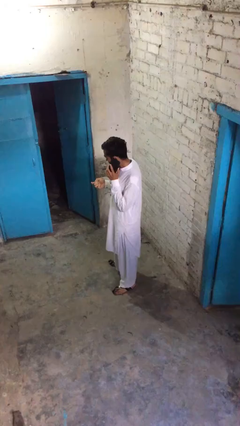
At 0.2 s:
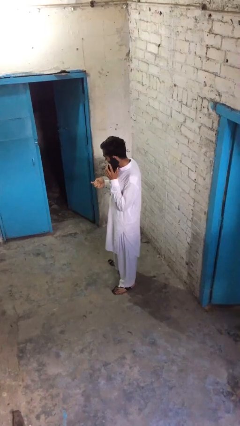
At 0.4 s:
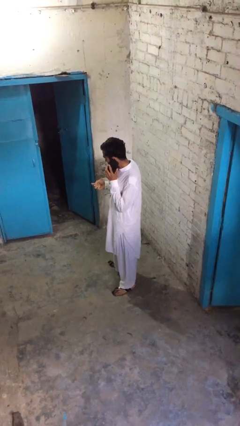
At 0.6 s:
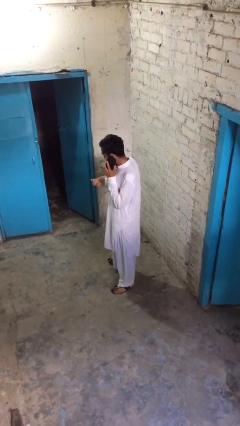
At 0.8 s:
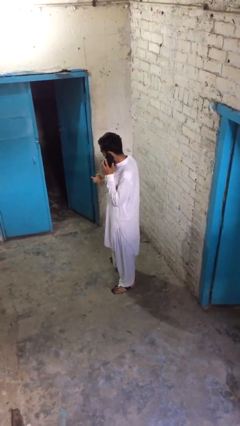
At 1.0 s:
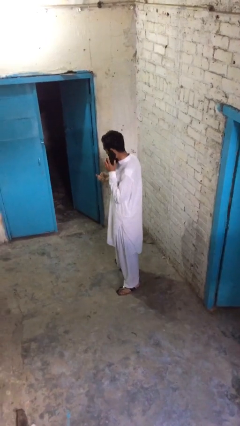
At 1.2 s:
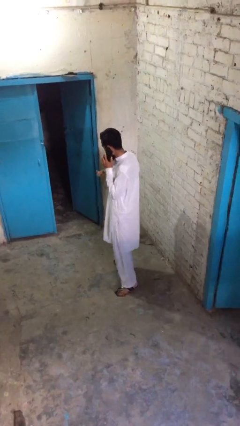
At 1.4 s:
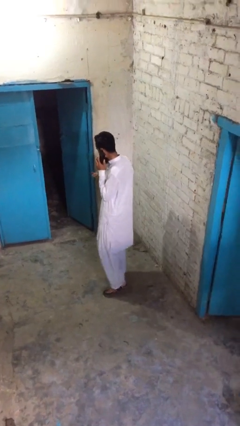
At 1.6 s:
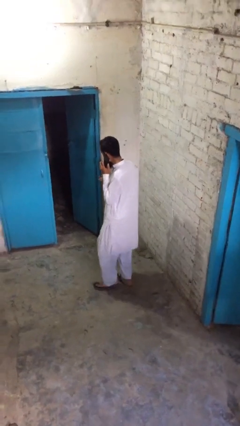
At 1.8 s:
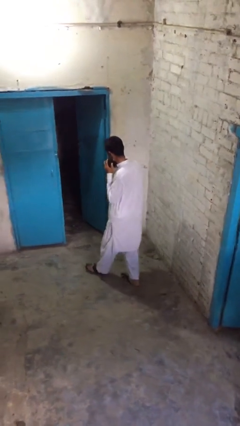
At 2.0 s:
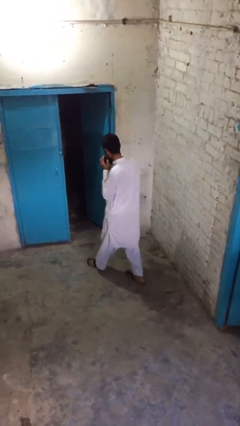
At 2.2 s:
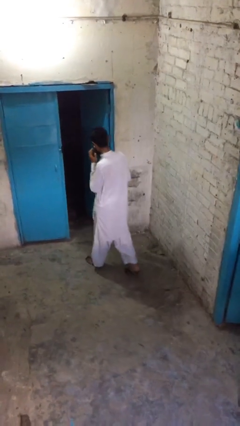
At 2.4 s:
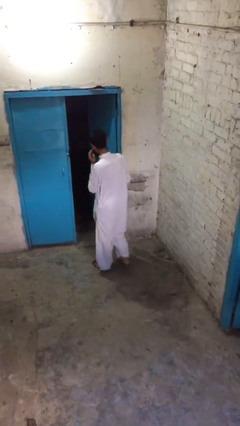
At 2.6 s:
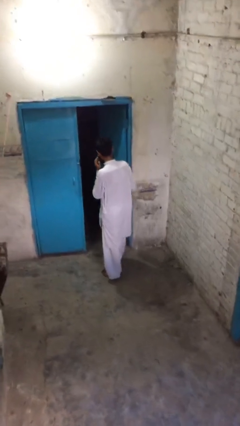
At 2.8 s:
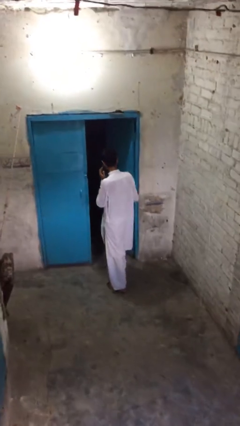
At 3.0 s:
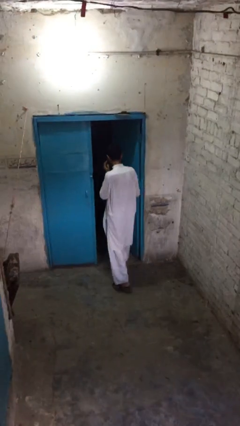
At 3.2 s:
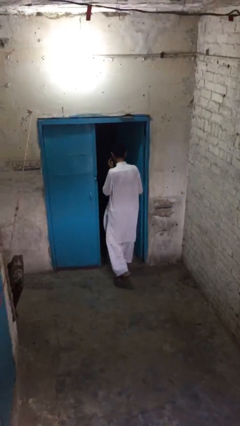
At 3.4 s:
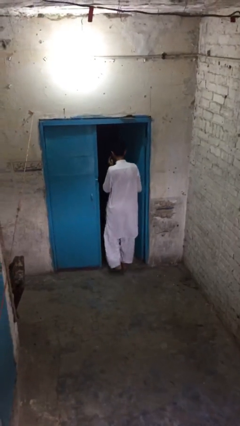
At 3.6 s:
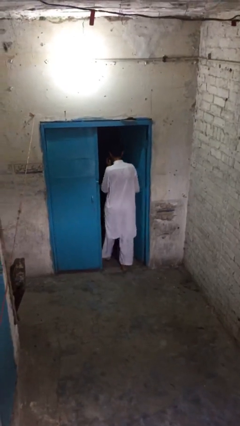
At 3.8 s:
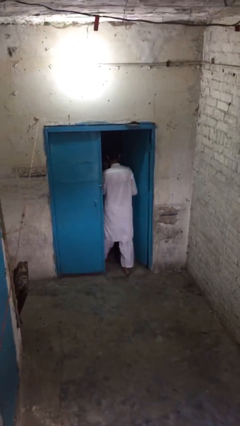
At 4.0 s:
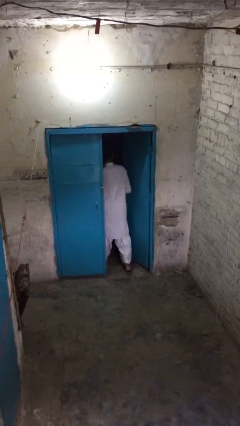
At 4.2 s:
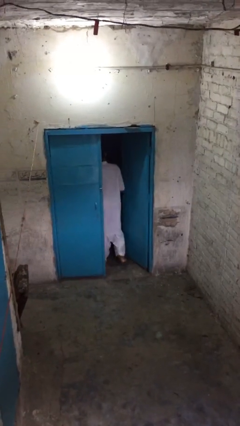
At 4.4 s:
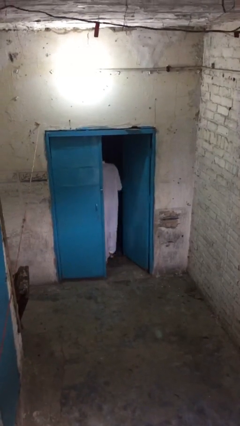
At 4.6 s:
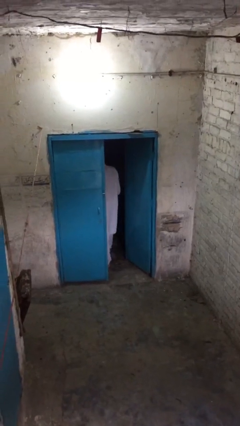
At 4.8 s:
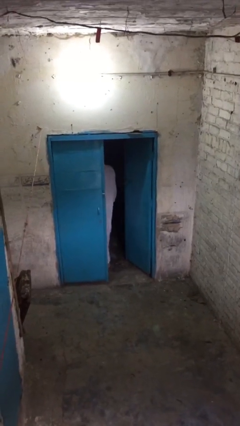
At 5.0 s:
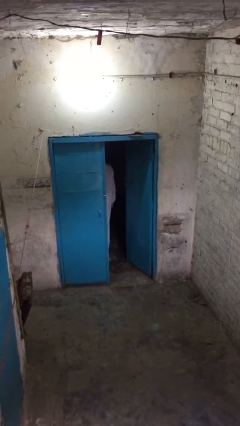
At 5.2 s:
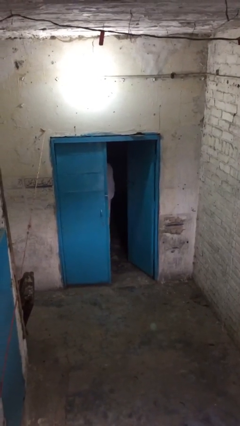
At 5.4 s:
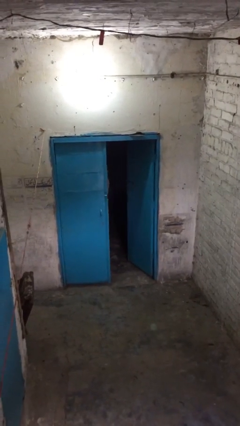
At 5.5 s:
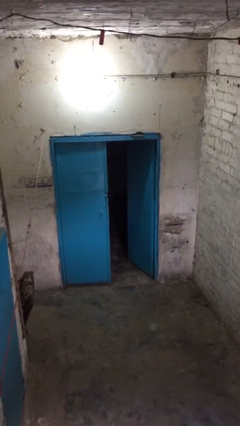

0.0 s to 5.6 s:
person exits scene through structure

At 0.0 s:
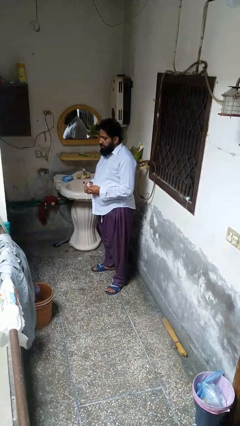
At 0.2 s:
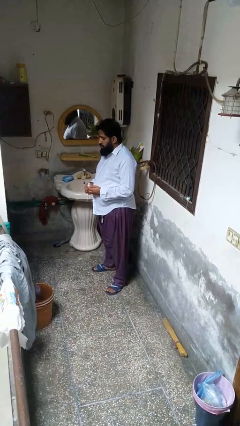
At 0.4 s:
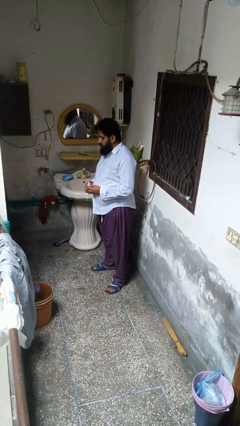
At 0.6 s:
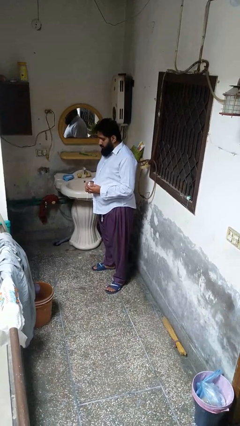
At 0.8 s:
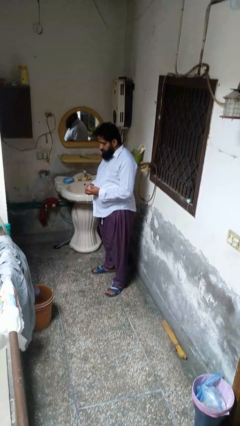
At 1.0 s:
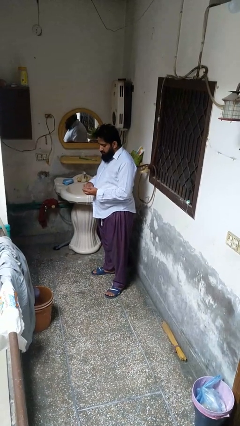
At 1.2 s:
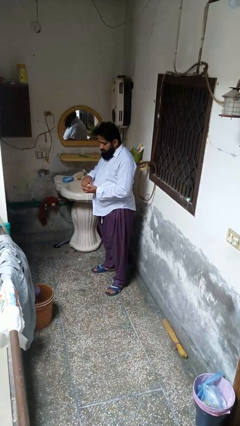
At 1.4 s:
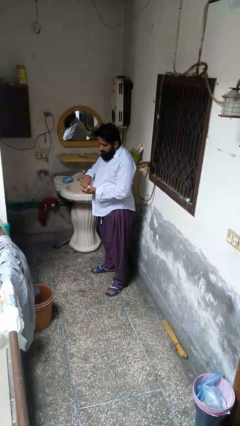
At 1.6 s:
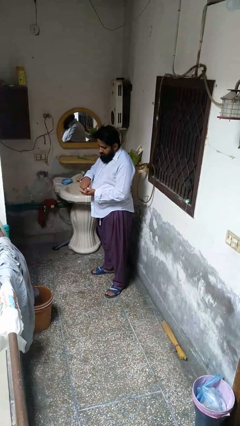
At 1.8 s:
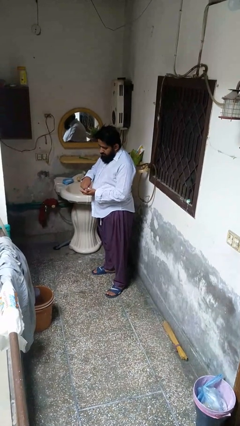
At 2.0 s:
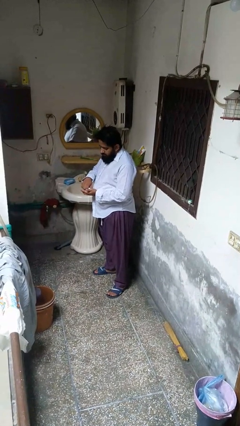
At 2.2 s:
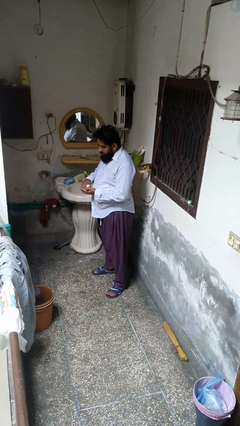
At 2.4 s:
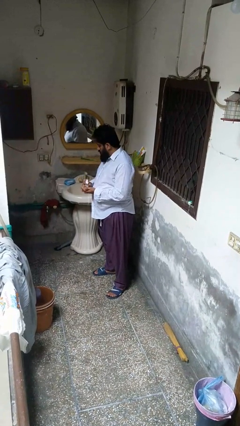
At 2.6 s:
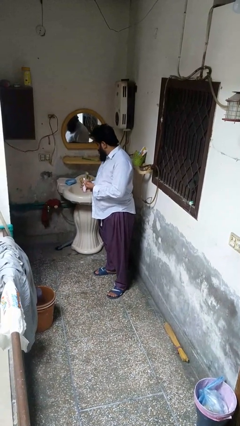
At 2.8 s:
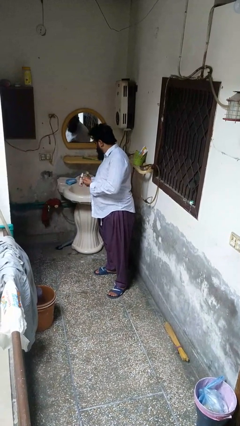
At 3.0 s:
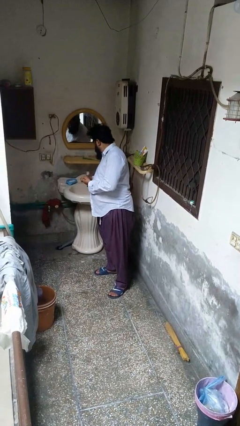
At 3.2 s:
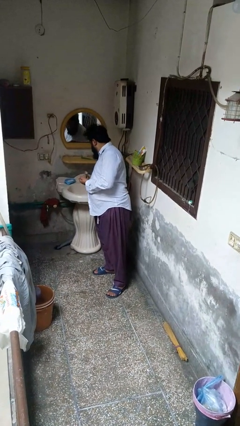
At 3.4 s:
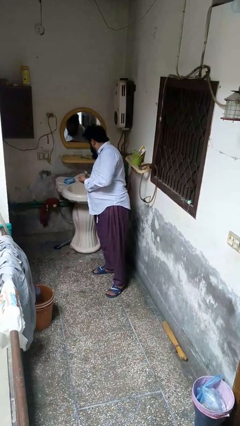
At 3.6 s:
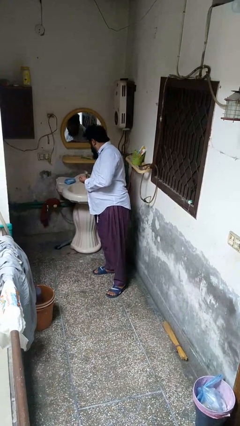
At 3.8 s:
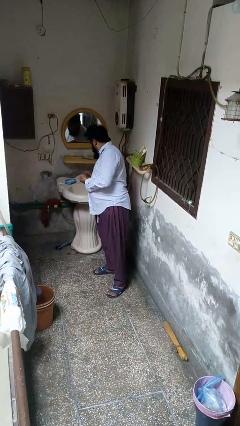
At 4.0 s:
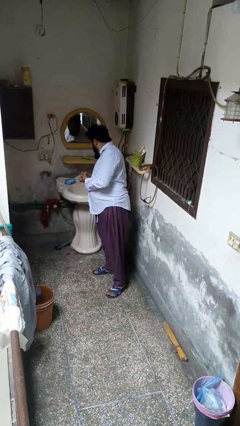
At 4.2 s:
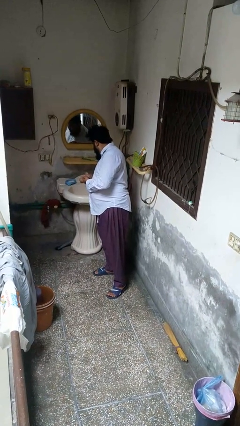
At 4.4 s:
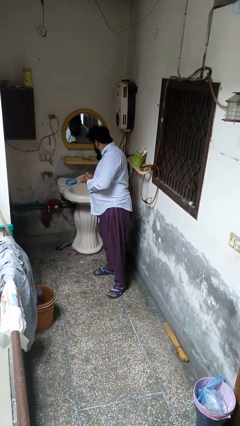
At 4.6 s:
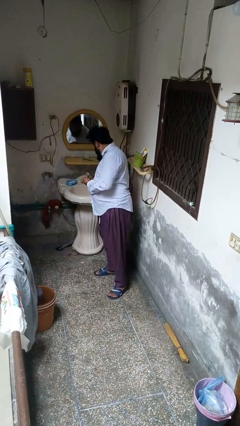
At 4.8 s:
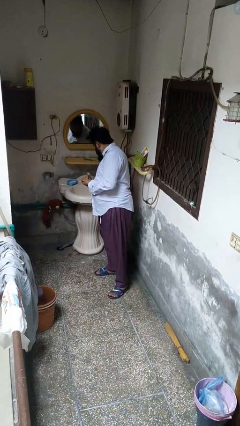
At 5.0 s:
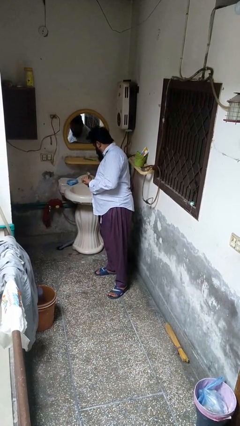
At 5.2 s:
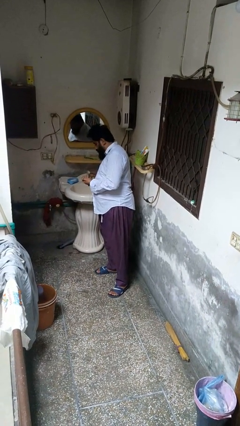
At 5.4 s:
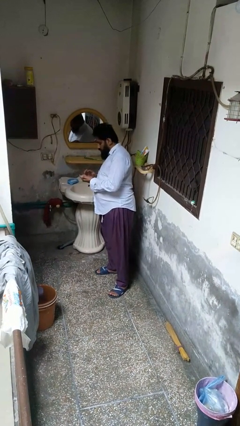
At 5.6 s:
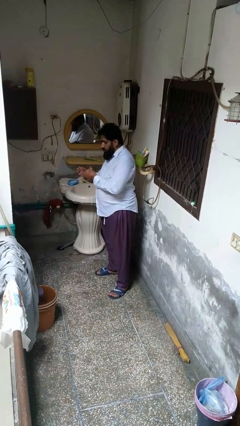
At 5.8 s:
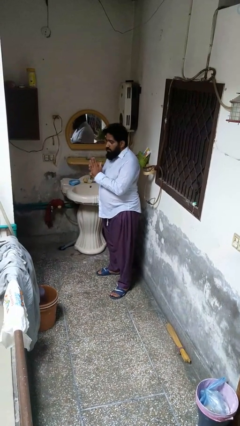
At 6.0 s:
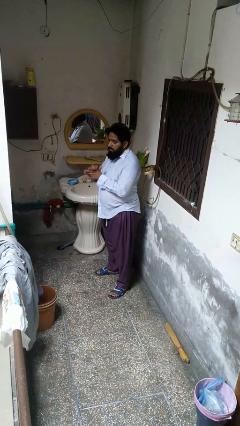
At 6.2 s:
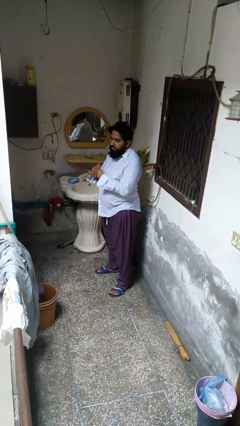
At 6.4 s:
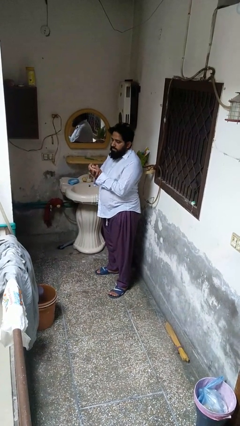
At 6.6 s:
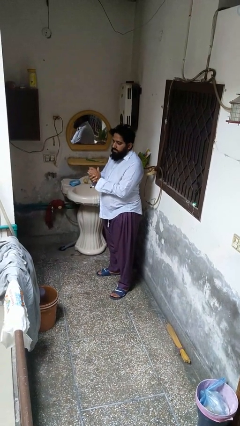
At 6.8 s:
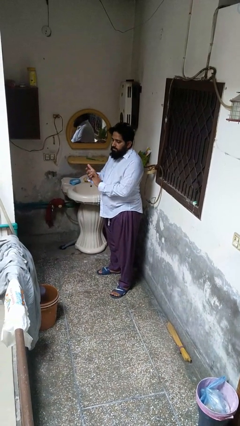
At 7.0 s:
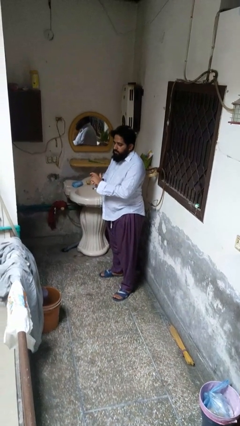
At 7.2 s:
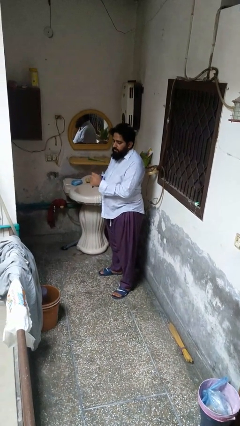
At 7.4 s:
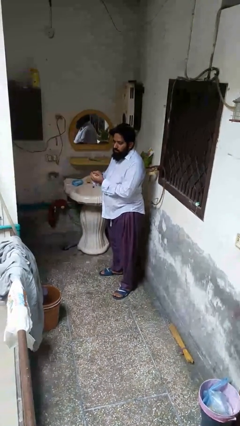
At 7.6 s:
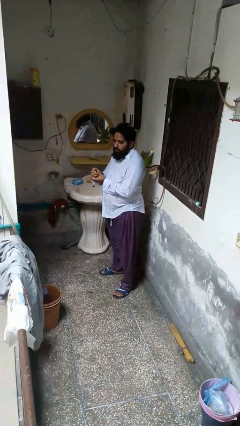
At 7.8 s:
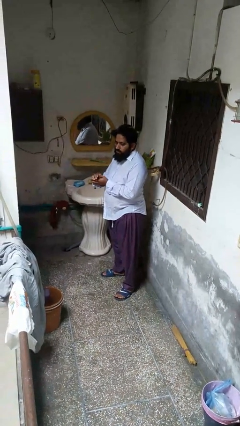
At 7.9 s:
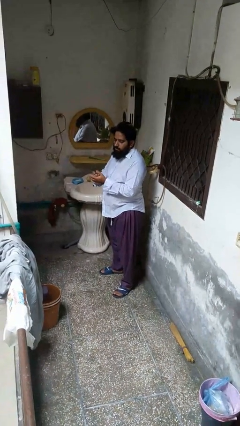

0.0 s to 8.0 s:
person applies sunscreen

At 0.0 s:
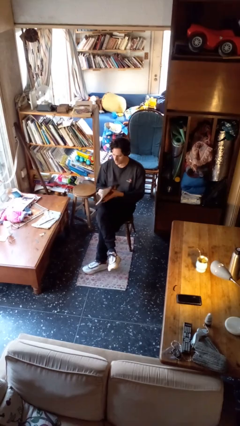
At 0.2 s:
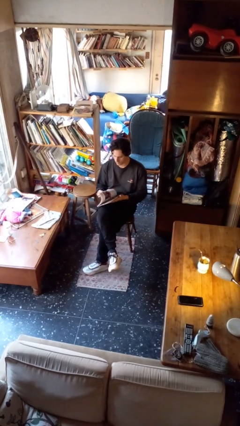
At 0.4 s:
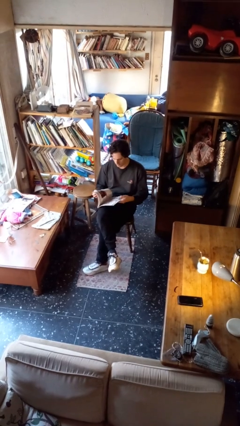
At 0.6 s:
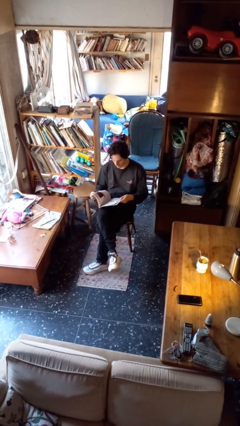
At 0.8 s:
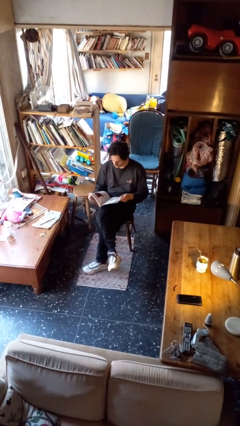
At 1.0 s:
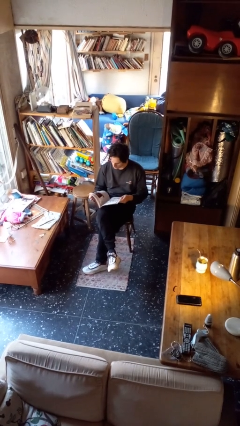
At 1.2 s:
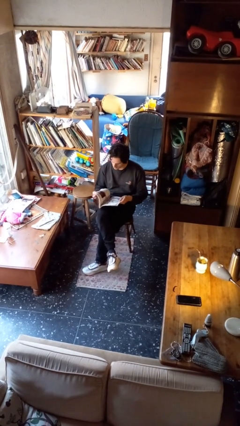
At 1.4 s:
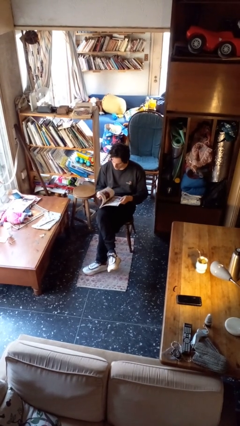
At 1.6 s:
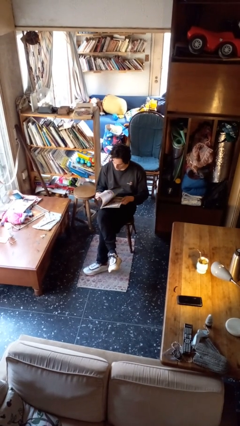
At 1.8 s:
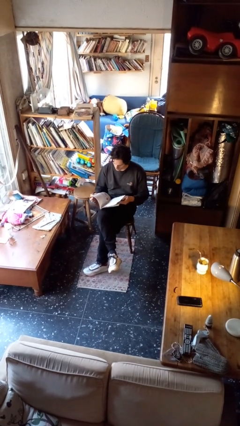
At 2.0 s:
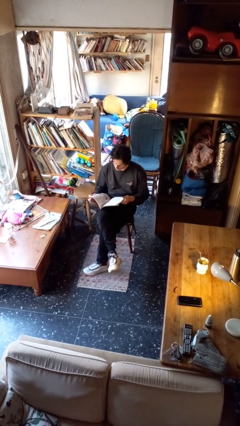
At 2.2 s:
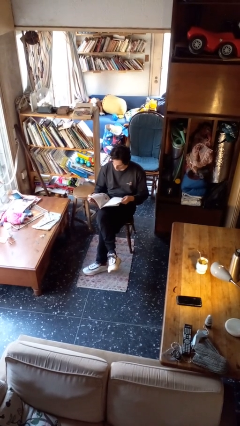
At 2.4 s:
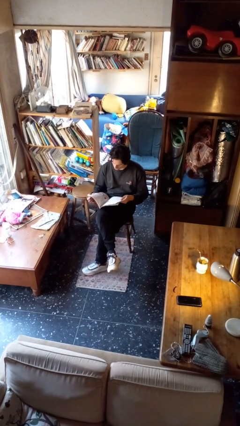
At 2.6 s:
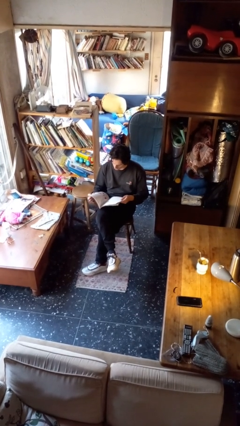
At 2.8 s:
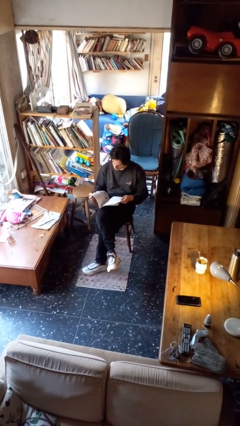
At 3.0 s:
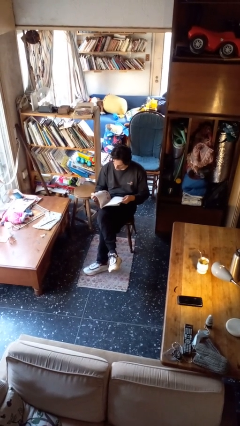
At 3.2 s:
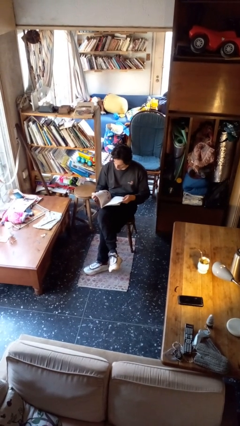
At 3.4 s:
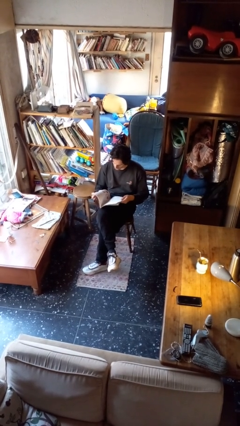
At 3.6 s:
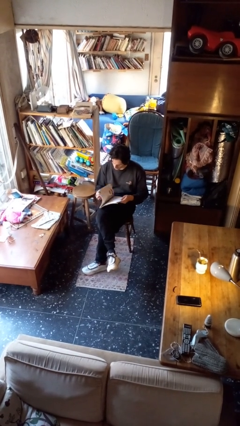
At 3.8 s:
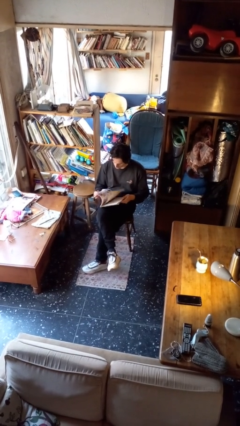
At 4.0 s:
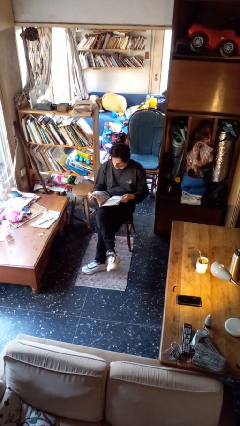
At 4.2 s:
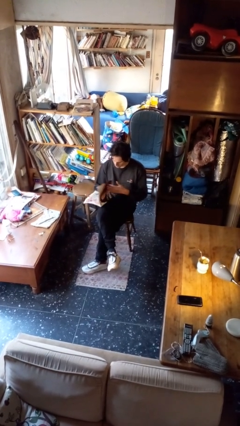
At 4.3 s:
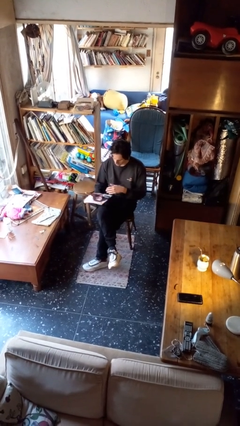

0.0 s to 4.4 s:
person reads magazine
